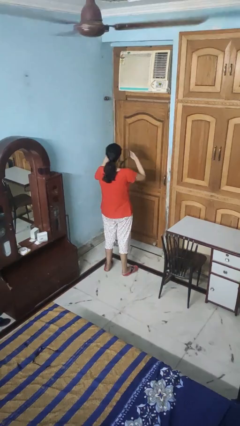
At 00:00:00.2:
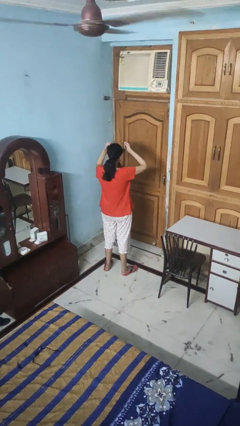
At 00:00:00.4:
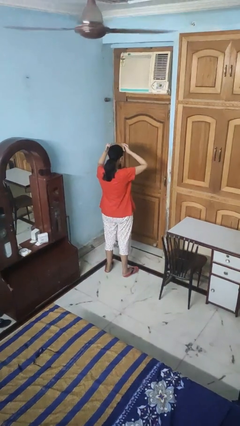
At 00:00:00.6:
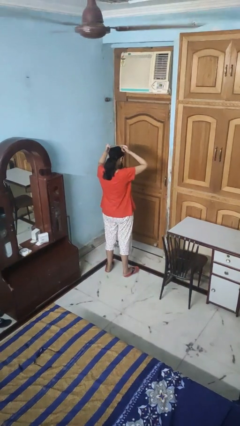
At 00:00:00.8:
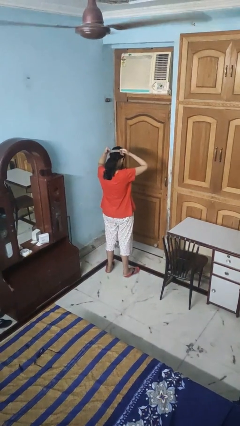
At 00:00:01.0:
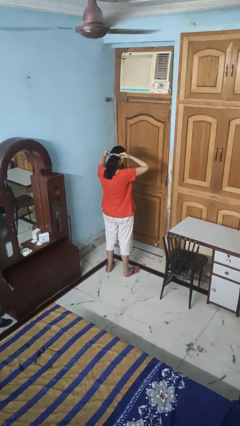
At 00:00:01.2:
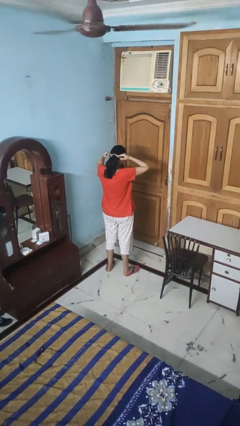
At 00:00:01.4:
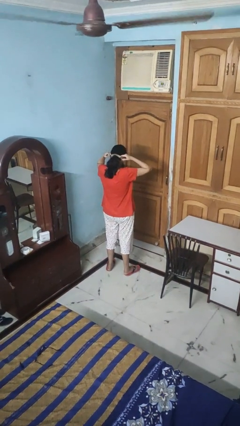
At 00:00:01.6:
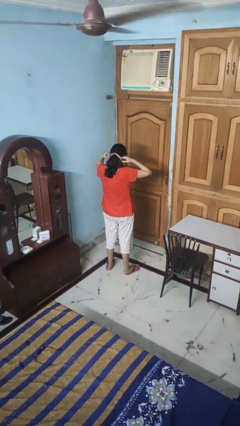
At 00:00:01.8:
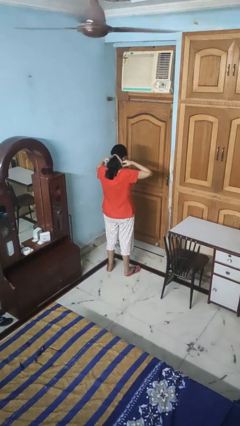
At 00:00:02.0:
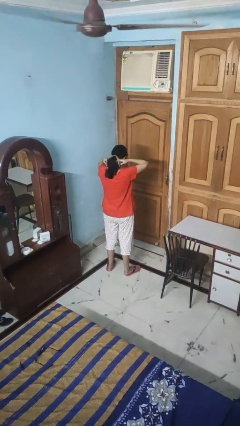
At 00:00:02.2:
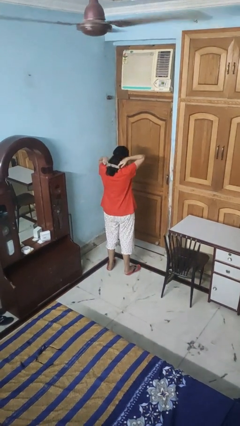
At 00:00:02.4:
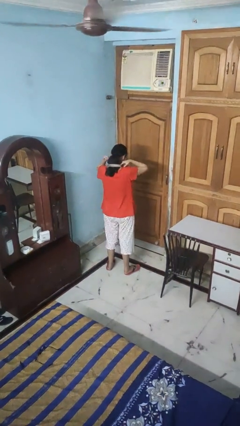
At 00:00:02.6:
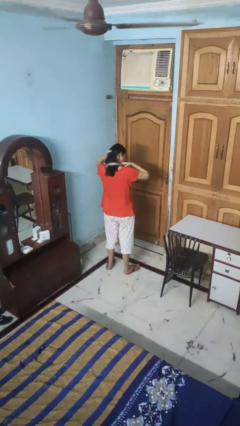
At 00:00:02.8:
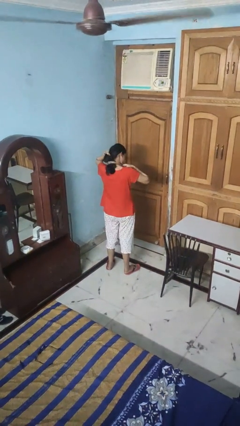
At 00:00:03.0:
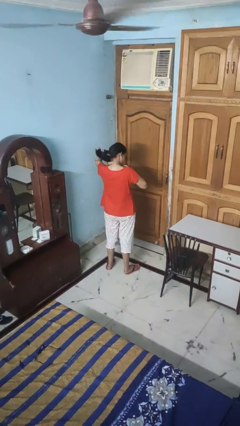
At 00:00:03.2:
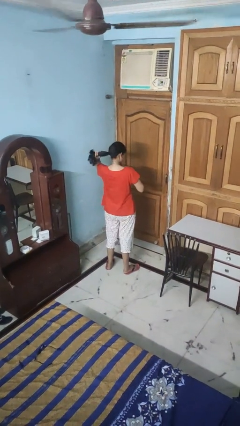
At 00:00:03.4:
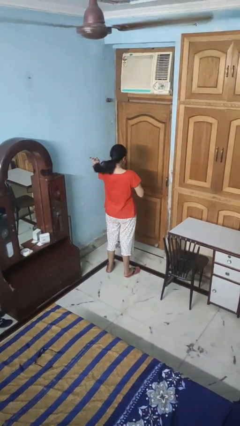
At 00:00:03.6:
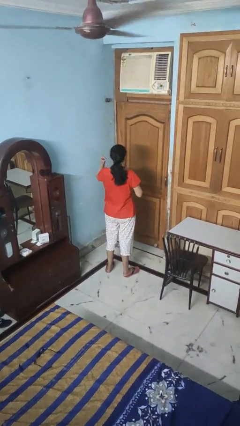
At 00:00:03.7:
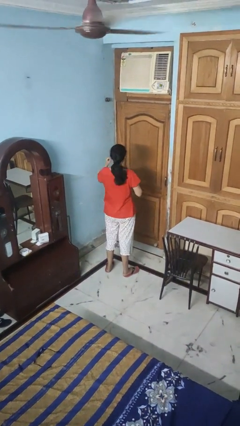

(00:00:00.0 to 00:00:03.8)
person puts on necktie

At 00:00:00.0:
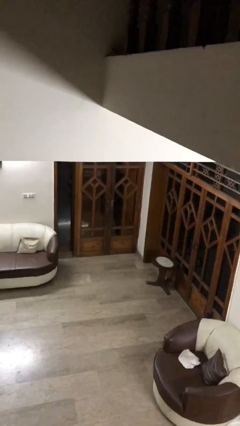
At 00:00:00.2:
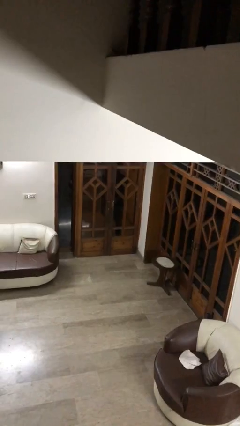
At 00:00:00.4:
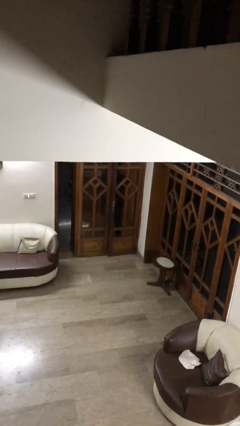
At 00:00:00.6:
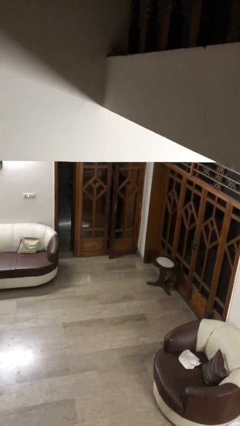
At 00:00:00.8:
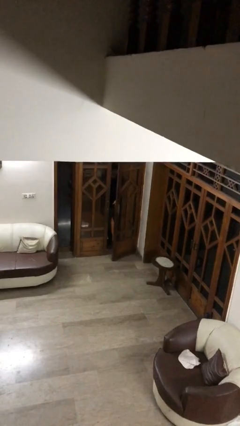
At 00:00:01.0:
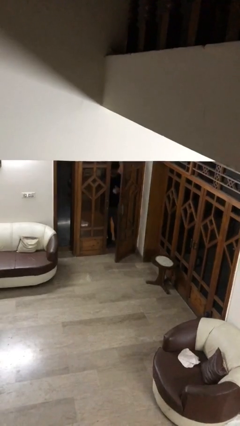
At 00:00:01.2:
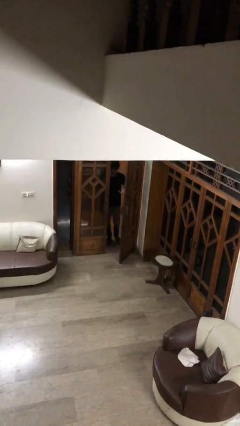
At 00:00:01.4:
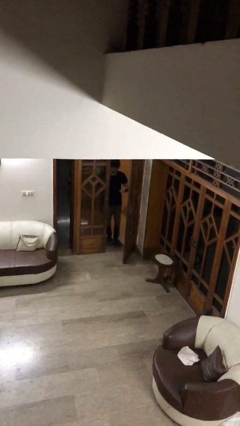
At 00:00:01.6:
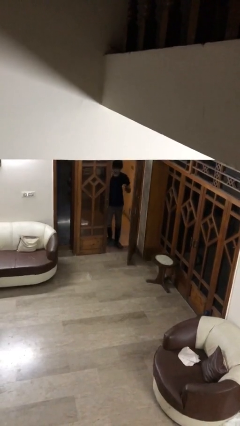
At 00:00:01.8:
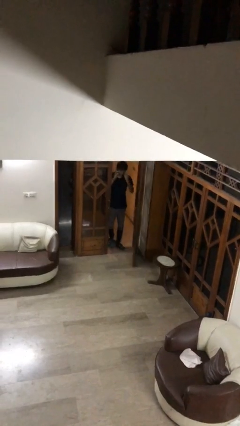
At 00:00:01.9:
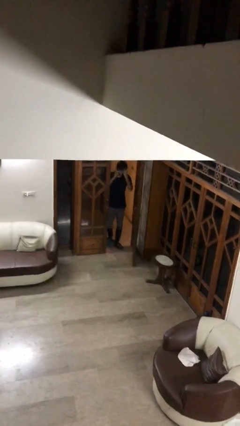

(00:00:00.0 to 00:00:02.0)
person opens facility door

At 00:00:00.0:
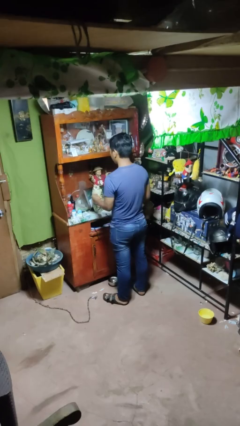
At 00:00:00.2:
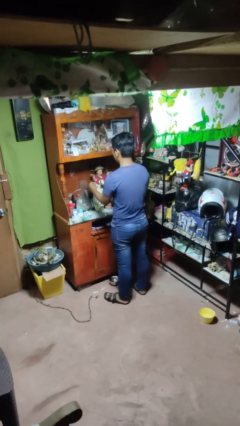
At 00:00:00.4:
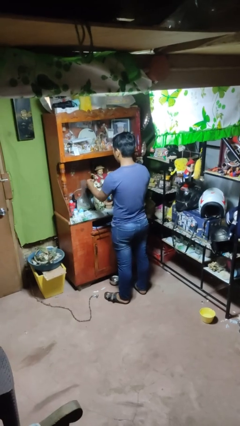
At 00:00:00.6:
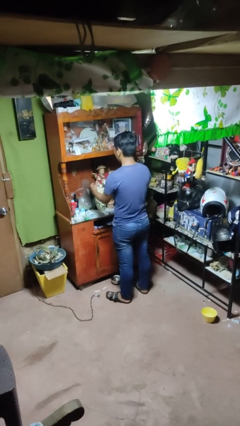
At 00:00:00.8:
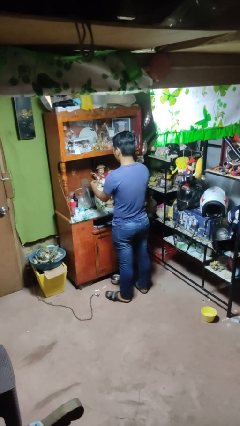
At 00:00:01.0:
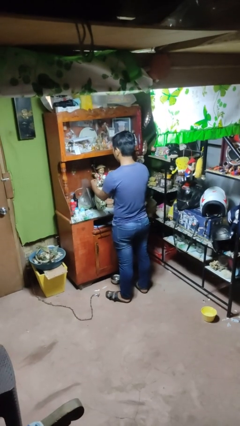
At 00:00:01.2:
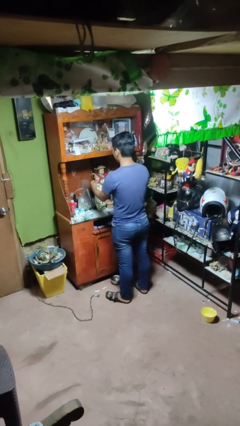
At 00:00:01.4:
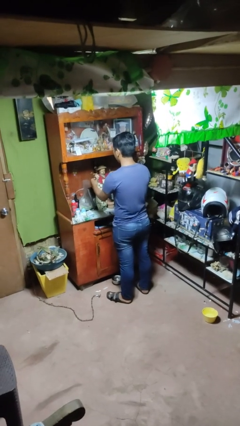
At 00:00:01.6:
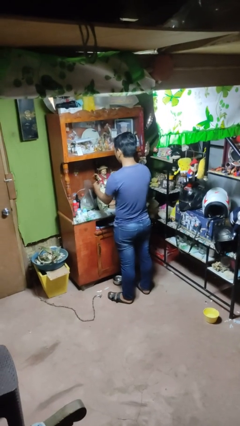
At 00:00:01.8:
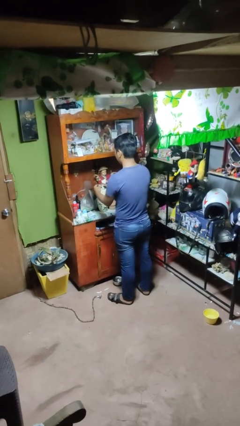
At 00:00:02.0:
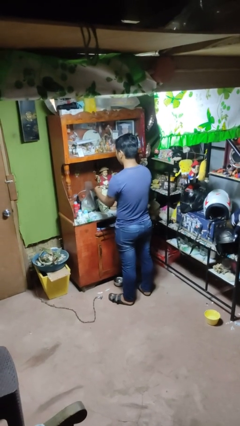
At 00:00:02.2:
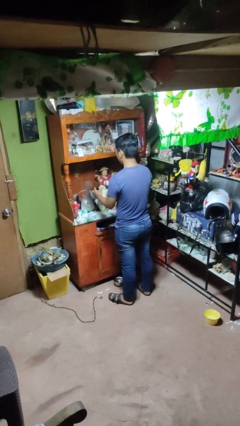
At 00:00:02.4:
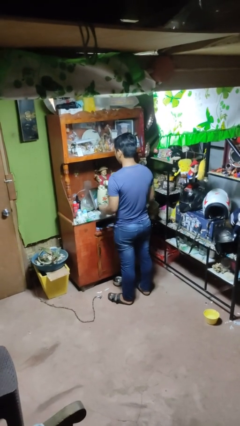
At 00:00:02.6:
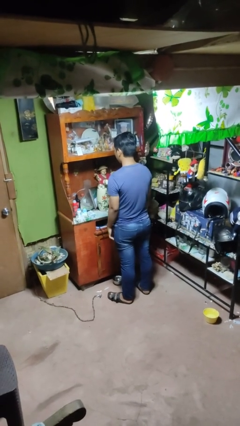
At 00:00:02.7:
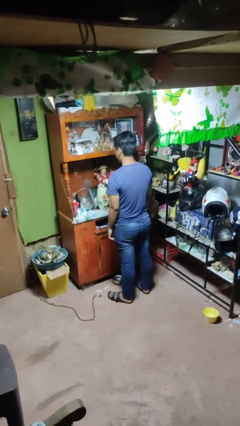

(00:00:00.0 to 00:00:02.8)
person arranges flowers in vase

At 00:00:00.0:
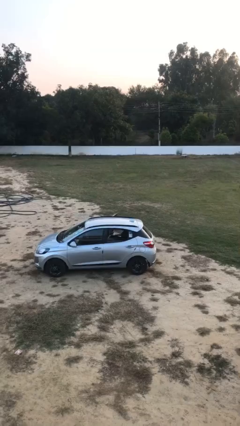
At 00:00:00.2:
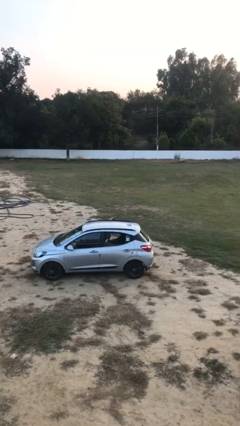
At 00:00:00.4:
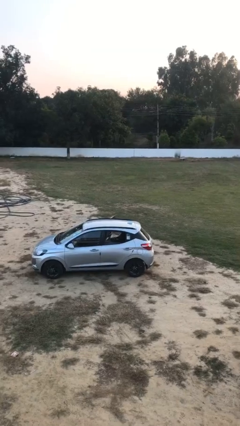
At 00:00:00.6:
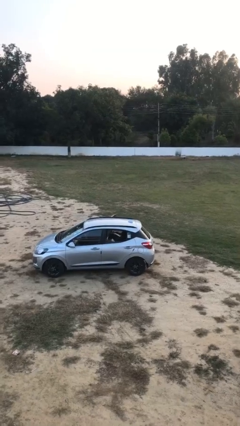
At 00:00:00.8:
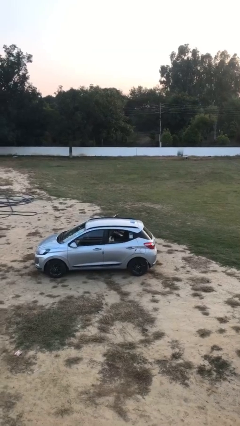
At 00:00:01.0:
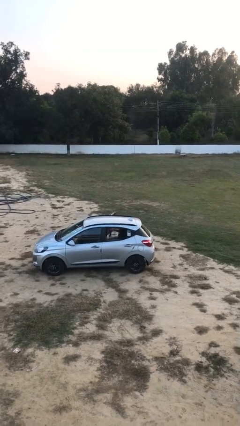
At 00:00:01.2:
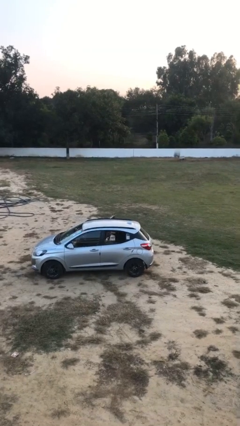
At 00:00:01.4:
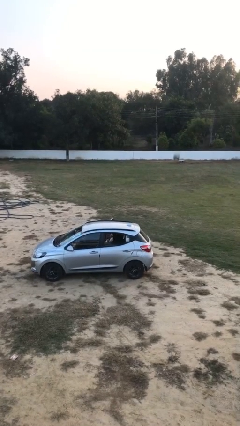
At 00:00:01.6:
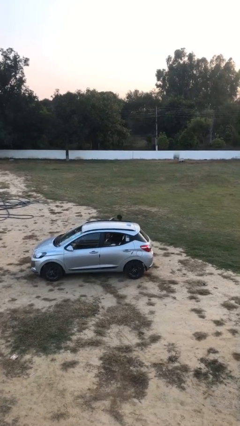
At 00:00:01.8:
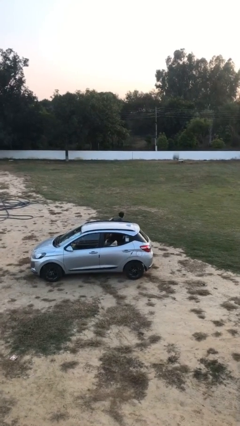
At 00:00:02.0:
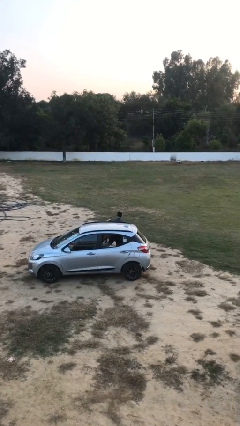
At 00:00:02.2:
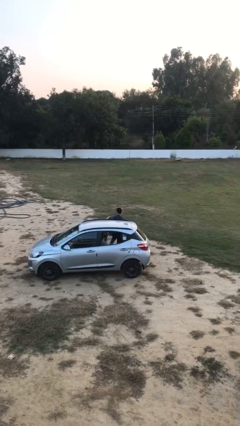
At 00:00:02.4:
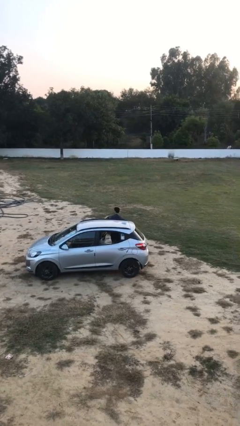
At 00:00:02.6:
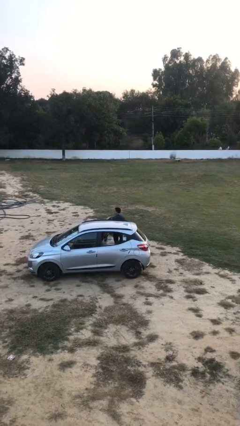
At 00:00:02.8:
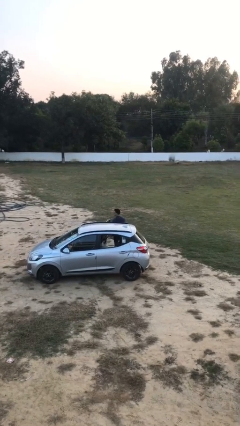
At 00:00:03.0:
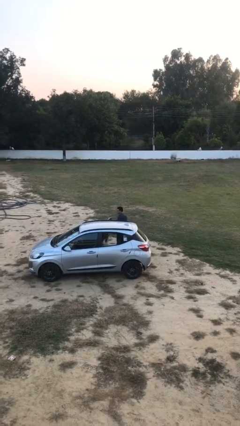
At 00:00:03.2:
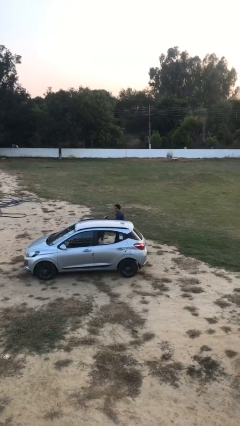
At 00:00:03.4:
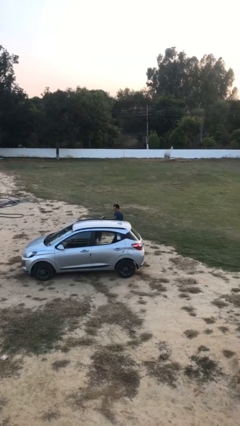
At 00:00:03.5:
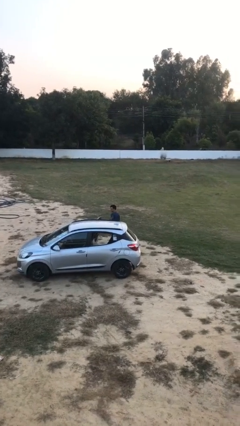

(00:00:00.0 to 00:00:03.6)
person exits car

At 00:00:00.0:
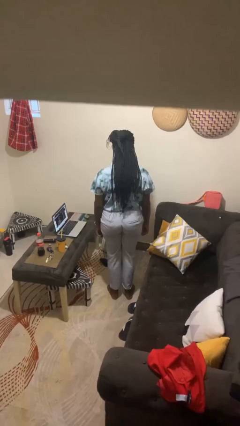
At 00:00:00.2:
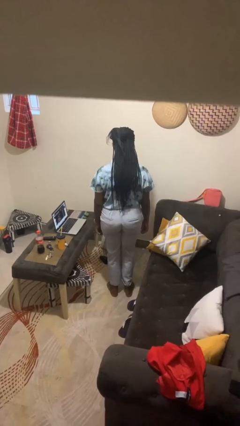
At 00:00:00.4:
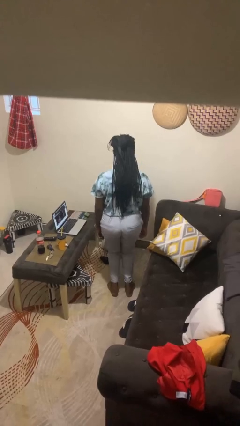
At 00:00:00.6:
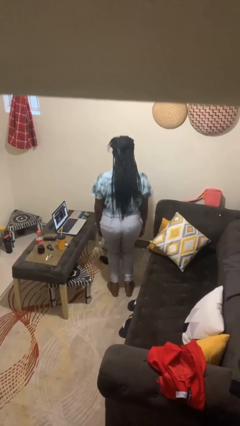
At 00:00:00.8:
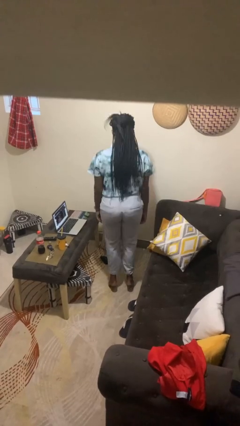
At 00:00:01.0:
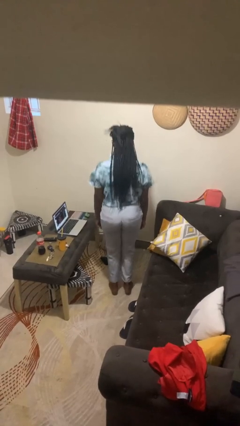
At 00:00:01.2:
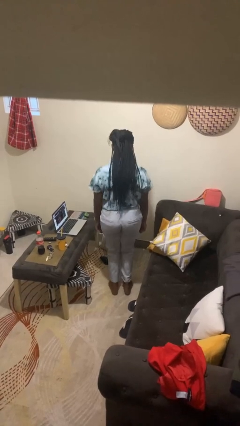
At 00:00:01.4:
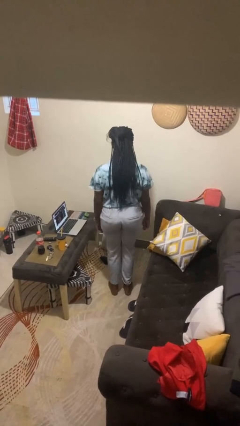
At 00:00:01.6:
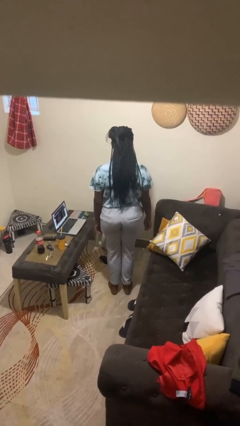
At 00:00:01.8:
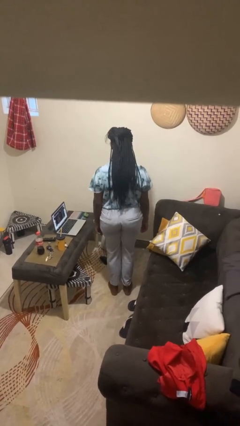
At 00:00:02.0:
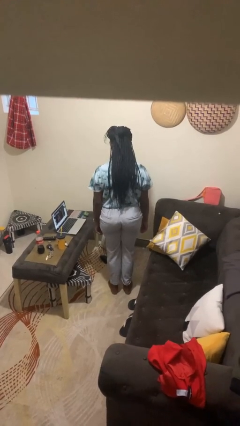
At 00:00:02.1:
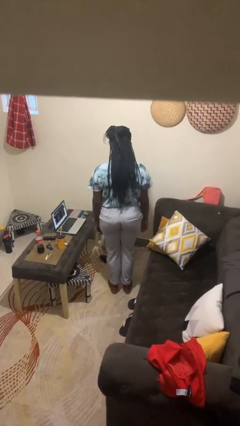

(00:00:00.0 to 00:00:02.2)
person jumps

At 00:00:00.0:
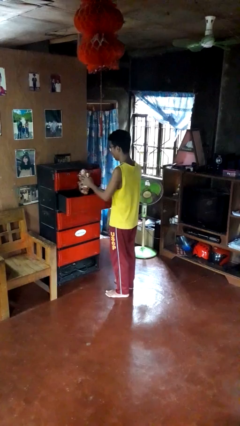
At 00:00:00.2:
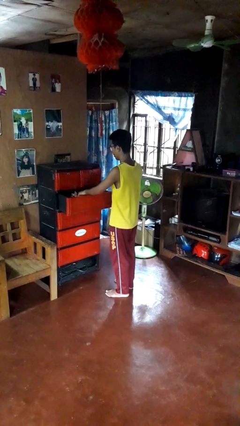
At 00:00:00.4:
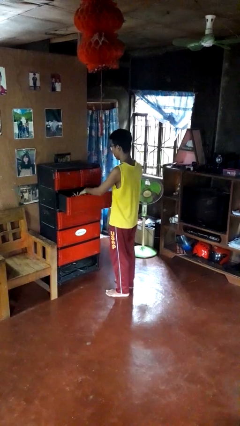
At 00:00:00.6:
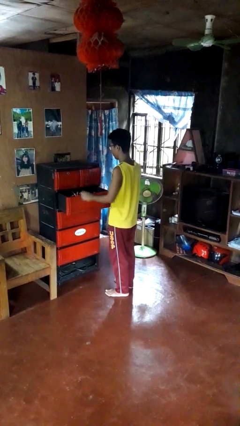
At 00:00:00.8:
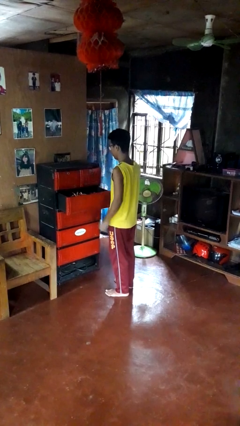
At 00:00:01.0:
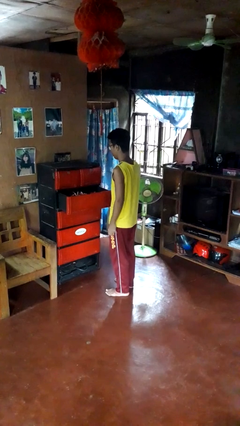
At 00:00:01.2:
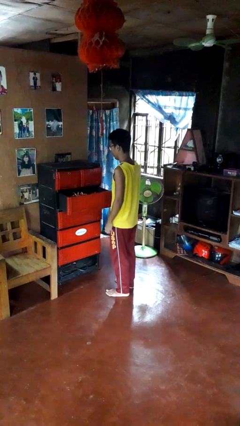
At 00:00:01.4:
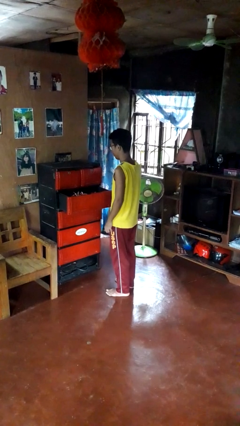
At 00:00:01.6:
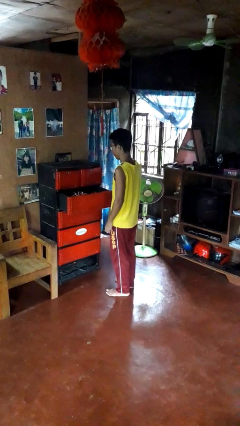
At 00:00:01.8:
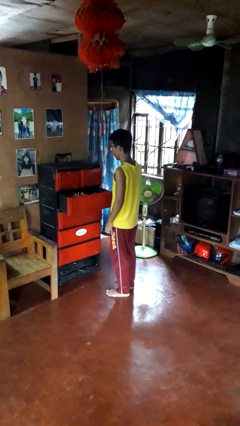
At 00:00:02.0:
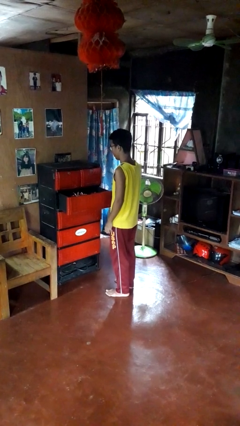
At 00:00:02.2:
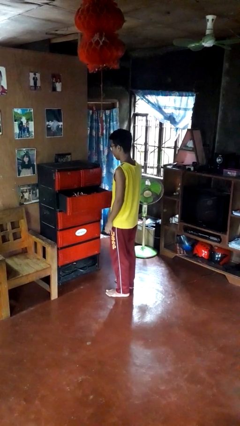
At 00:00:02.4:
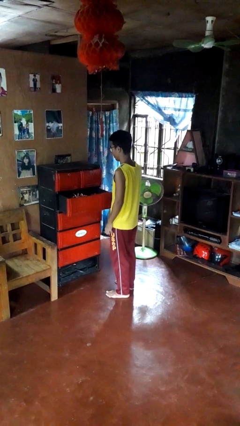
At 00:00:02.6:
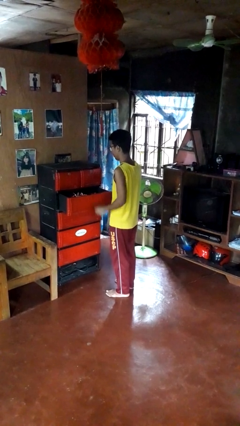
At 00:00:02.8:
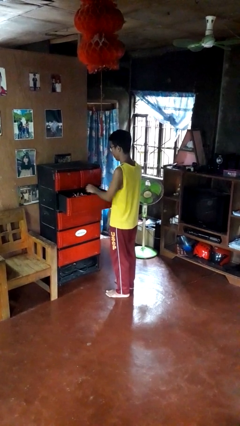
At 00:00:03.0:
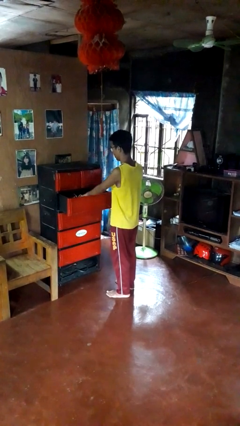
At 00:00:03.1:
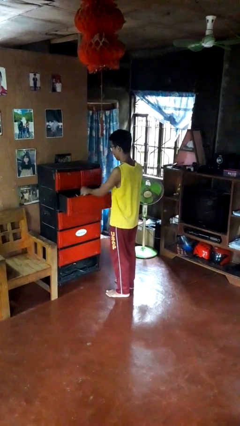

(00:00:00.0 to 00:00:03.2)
person puts clothes into dresser
